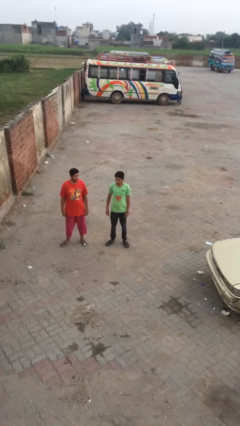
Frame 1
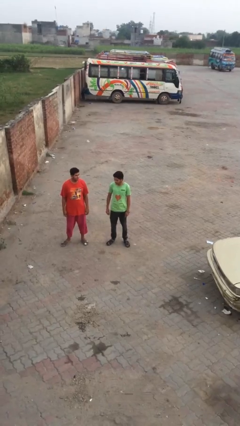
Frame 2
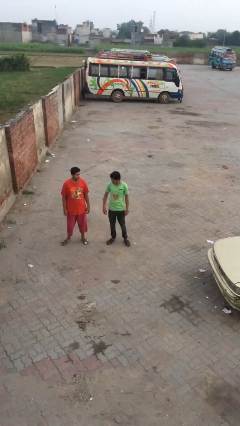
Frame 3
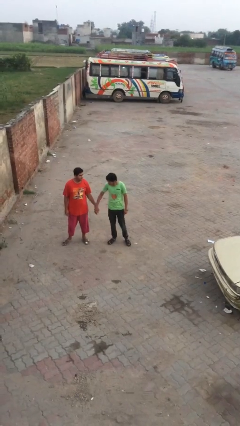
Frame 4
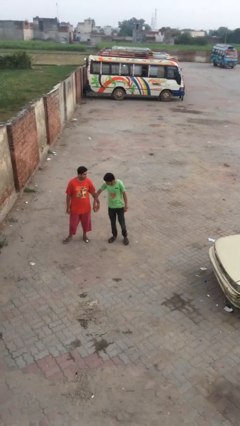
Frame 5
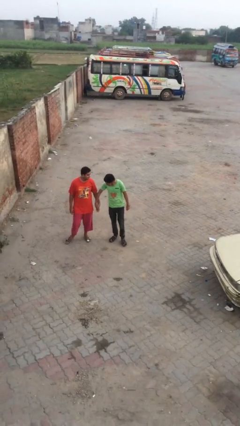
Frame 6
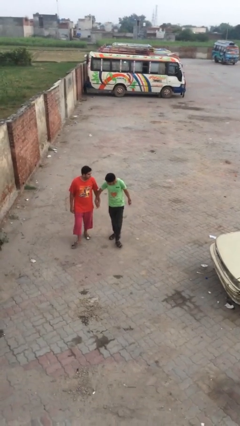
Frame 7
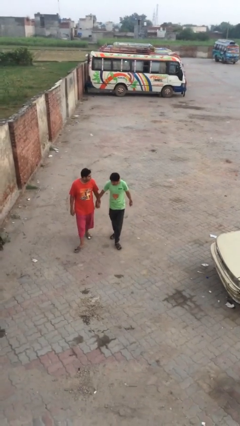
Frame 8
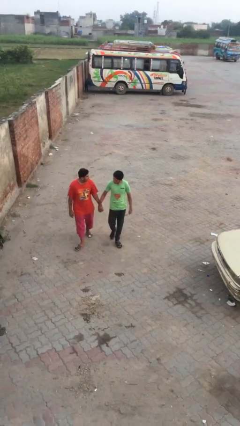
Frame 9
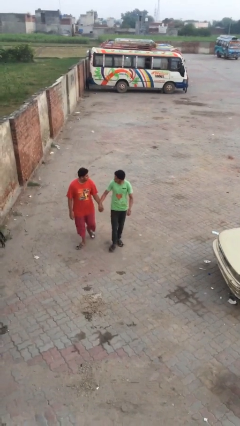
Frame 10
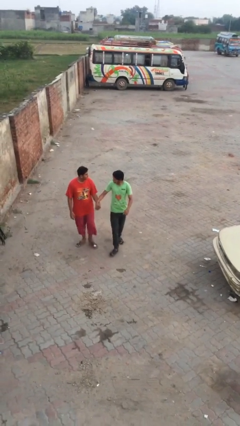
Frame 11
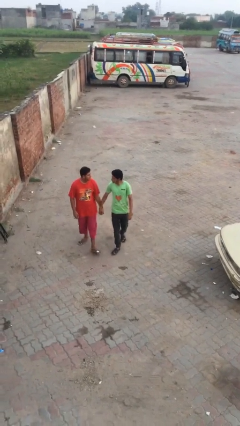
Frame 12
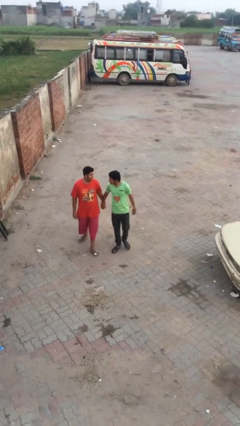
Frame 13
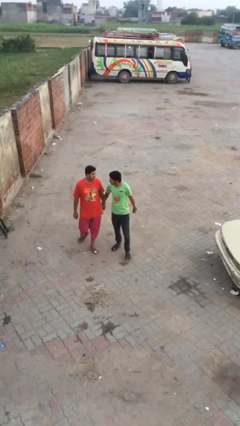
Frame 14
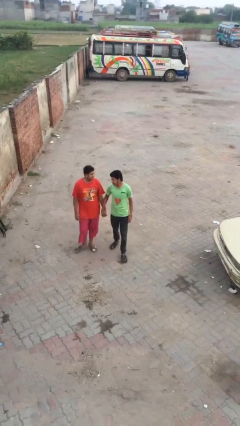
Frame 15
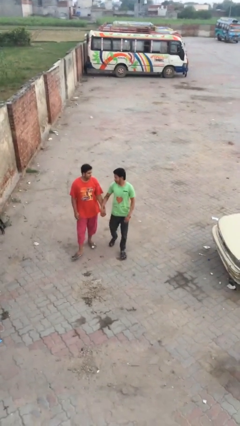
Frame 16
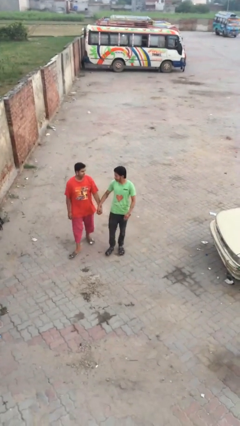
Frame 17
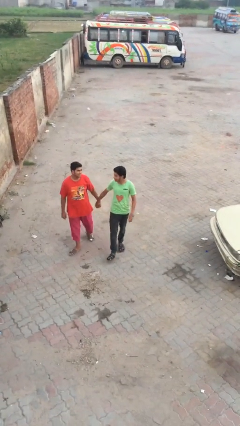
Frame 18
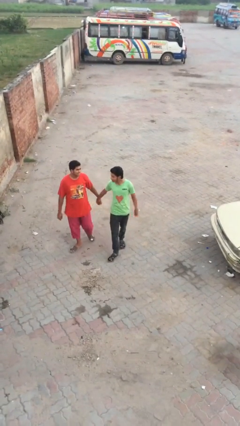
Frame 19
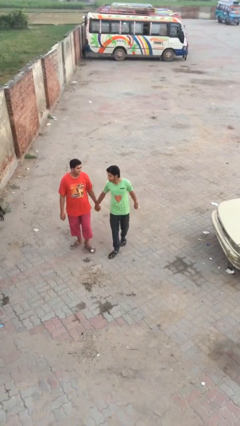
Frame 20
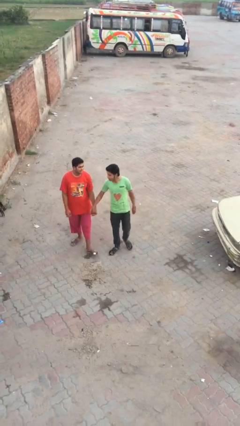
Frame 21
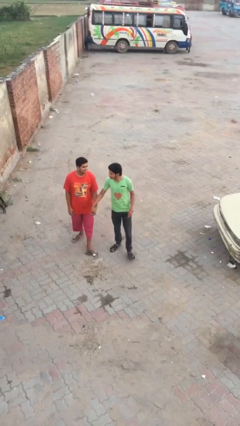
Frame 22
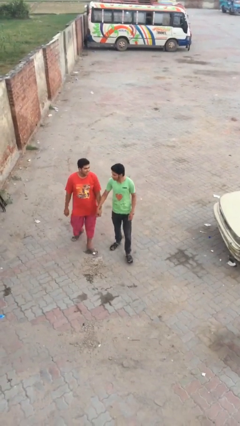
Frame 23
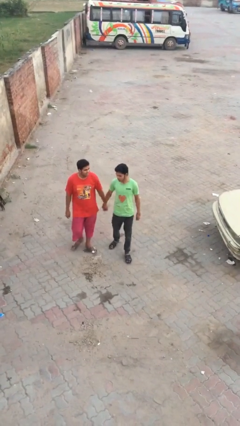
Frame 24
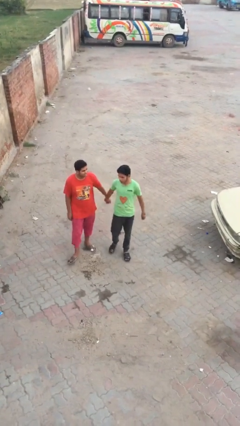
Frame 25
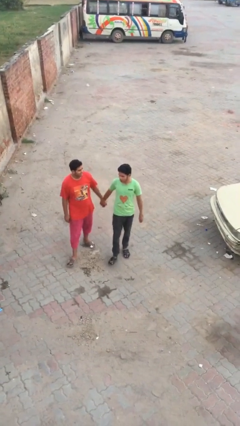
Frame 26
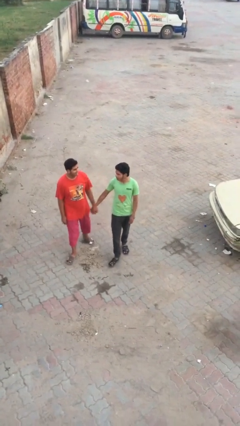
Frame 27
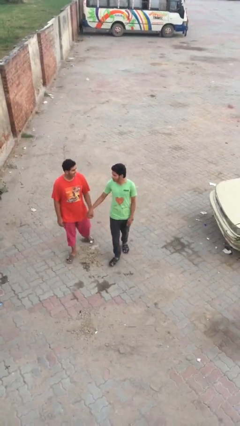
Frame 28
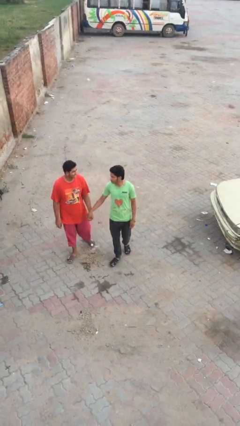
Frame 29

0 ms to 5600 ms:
person holds hand

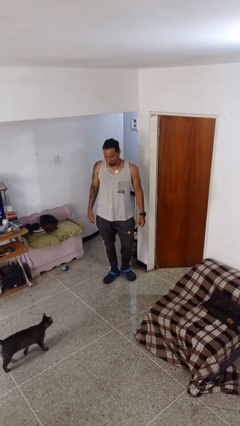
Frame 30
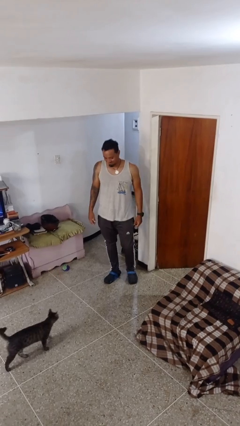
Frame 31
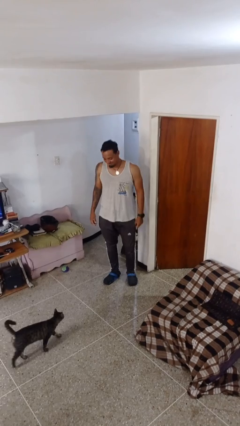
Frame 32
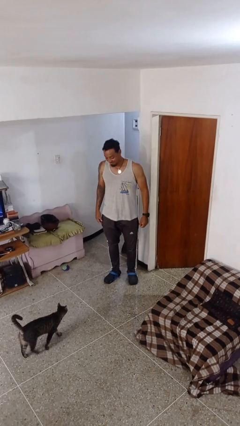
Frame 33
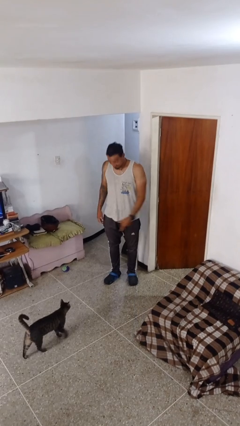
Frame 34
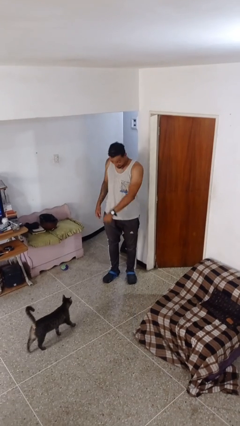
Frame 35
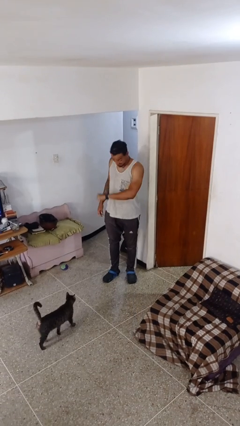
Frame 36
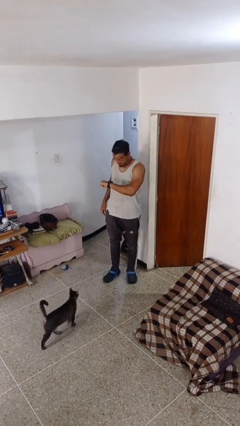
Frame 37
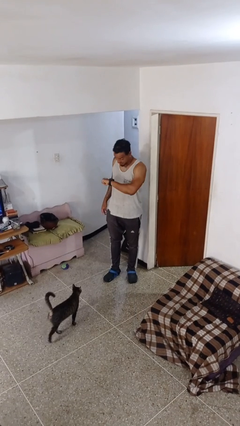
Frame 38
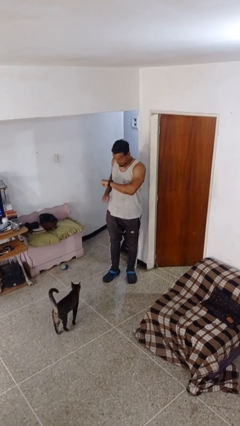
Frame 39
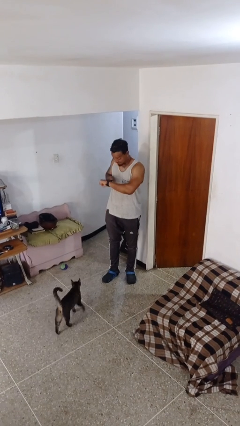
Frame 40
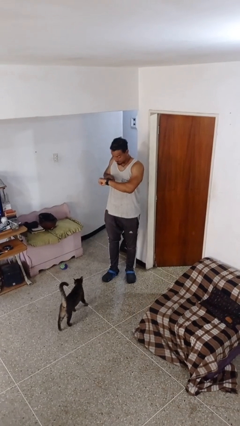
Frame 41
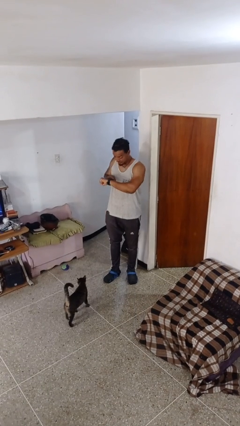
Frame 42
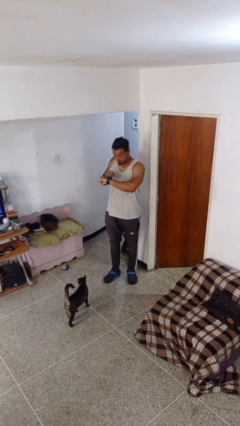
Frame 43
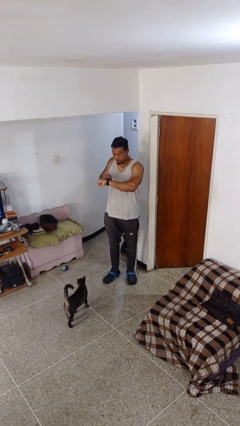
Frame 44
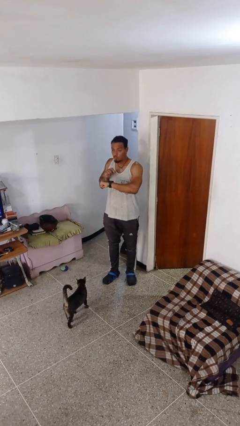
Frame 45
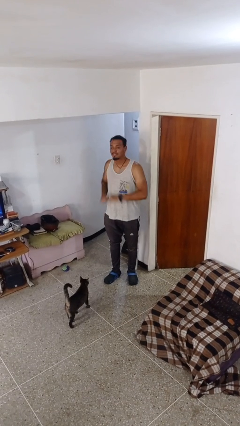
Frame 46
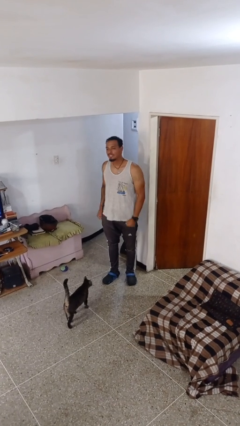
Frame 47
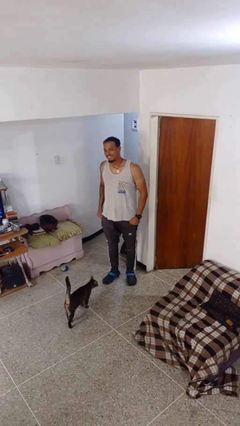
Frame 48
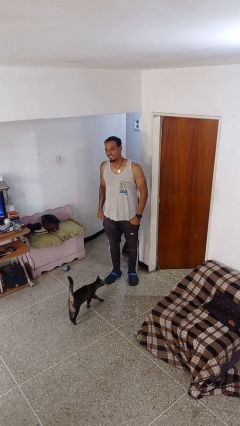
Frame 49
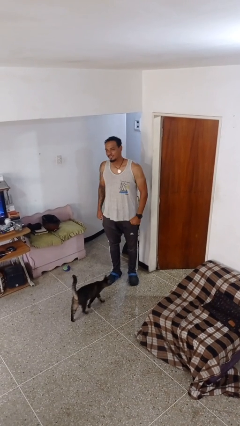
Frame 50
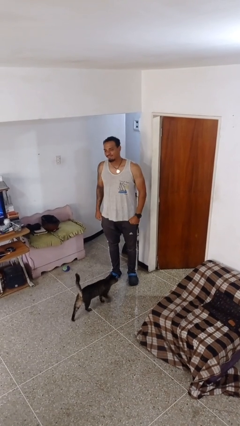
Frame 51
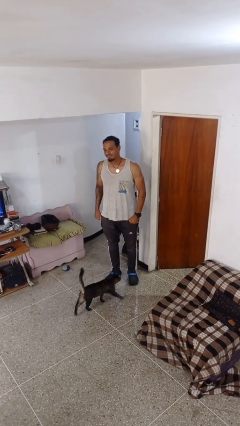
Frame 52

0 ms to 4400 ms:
person looks at wristwatch

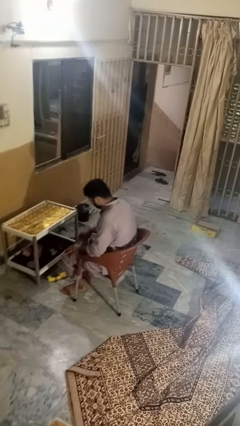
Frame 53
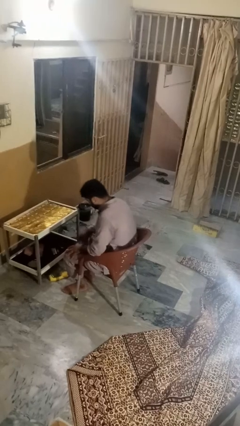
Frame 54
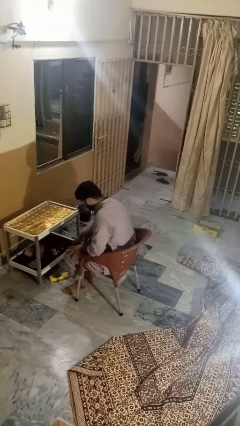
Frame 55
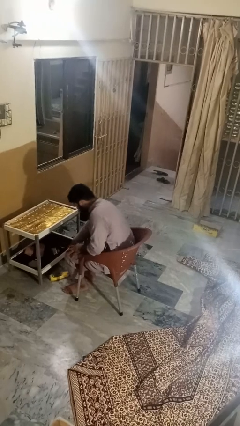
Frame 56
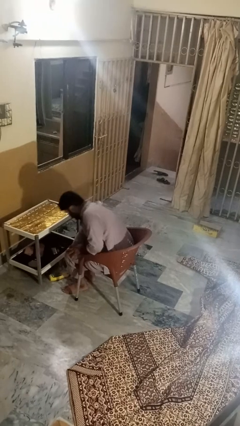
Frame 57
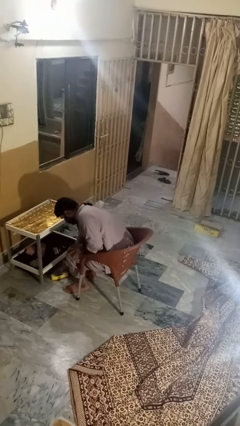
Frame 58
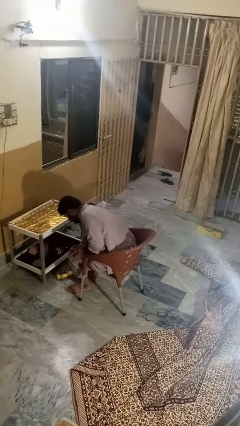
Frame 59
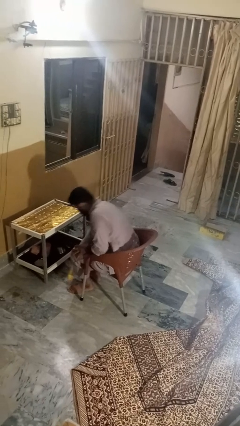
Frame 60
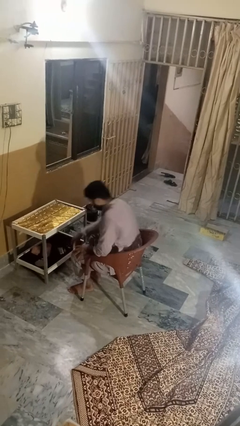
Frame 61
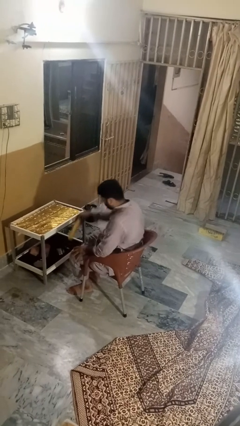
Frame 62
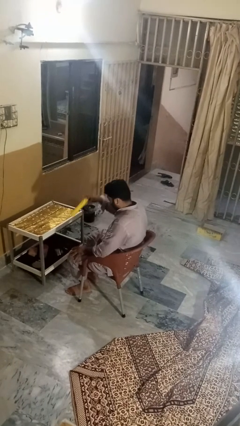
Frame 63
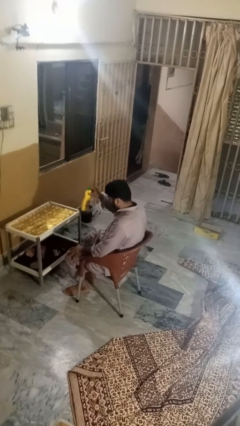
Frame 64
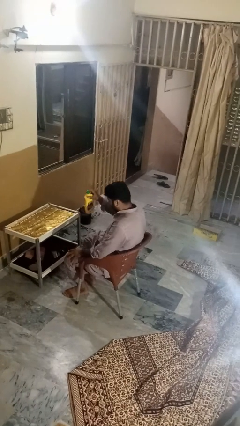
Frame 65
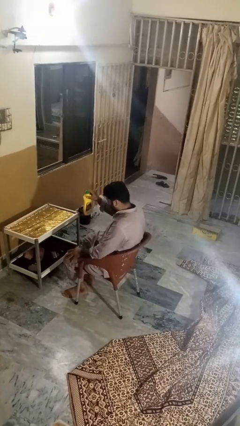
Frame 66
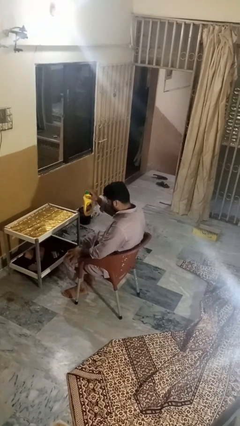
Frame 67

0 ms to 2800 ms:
person picks up object from floor

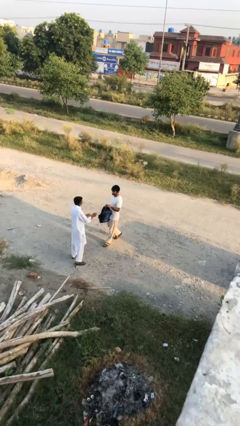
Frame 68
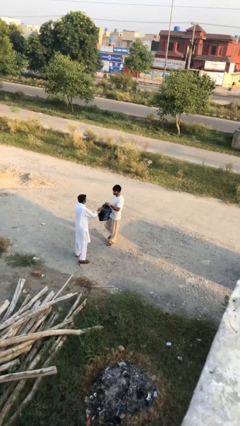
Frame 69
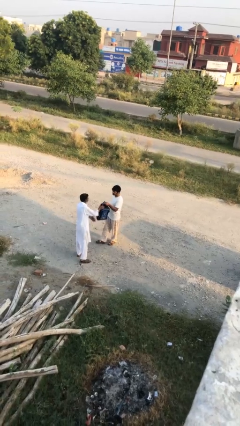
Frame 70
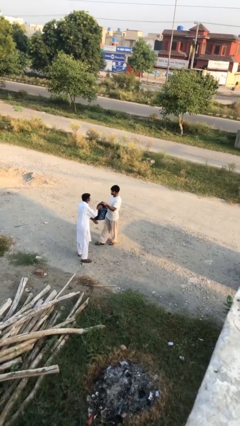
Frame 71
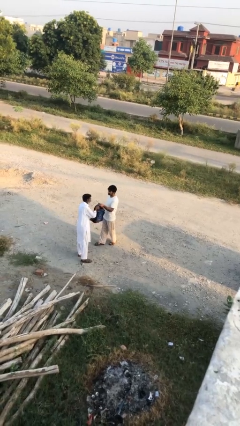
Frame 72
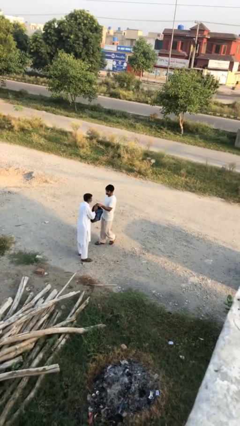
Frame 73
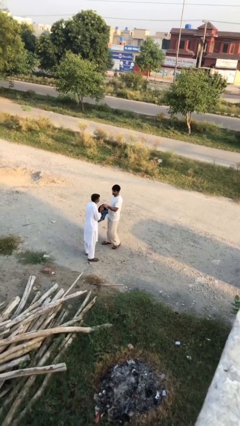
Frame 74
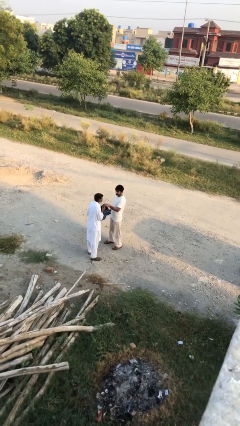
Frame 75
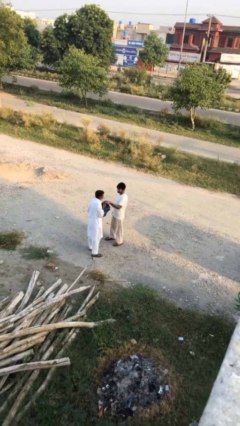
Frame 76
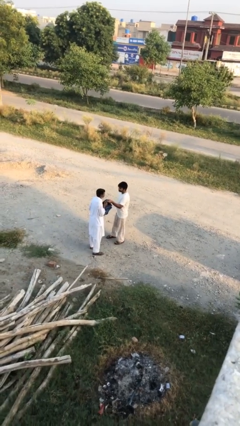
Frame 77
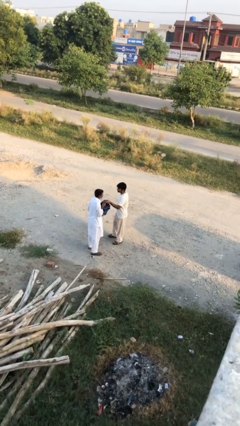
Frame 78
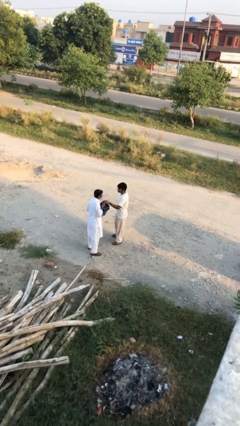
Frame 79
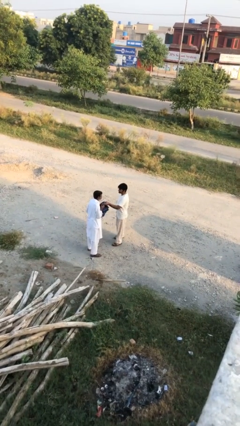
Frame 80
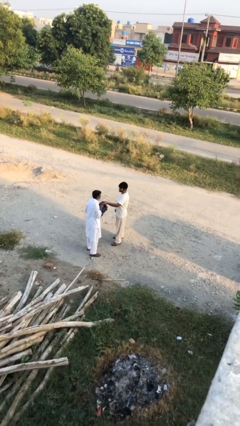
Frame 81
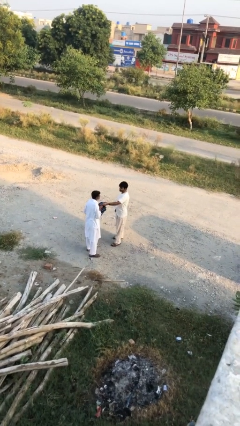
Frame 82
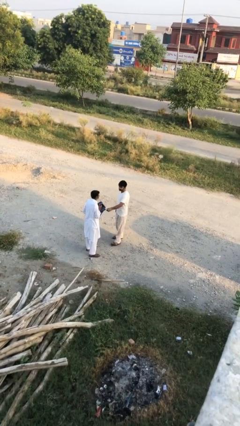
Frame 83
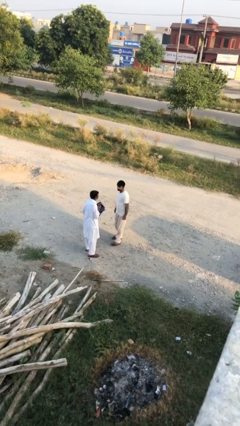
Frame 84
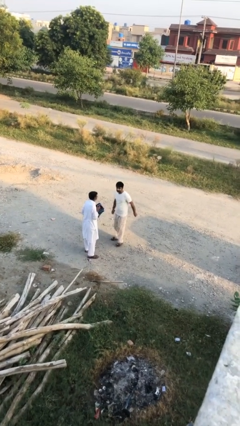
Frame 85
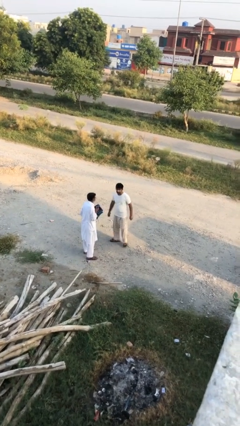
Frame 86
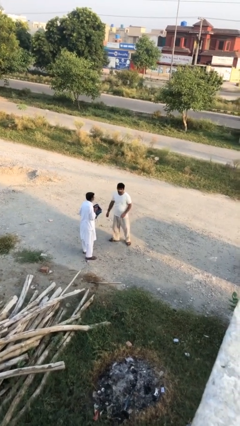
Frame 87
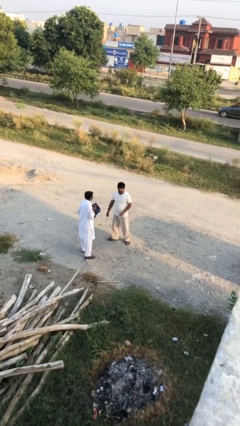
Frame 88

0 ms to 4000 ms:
person transfers object to person

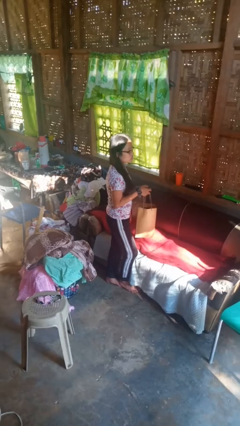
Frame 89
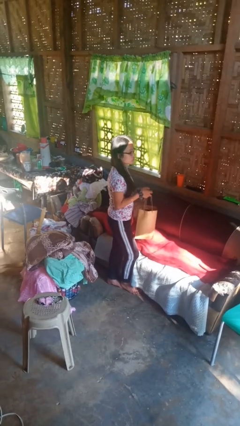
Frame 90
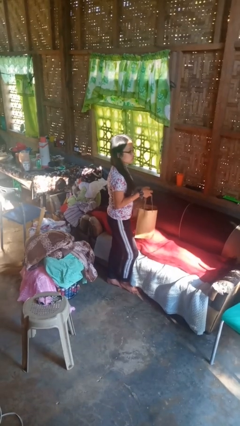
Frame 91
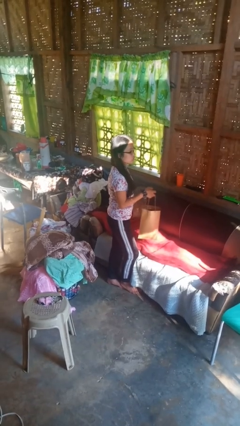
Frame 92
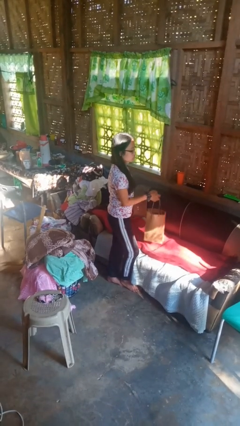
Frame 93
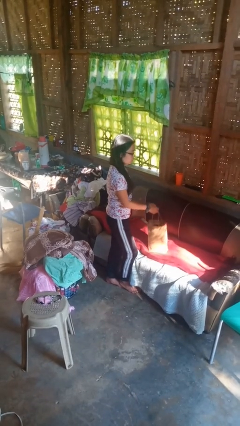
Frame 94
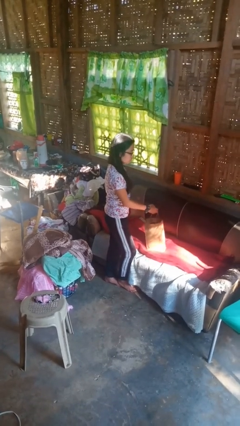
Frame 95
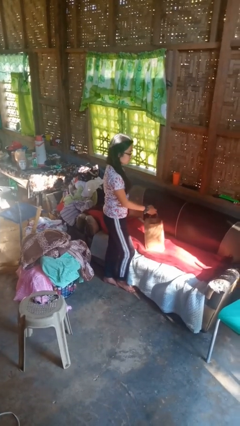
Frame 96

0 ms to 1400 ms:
person puts down object on couch
